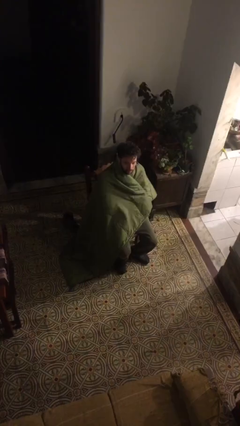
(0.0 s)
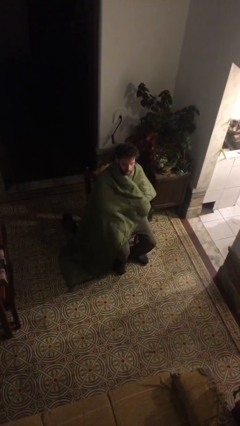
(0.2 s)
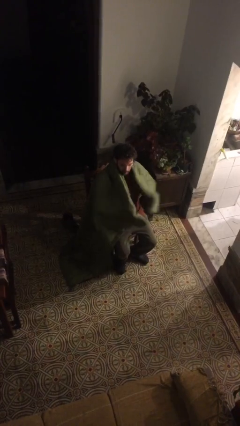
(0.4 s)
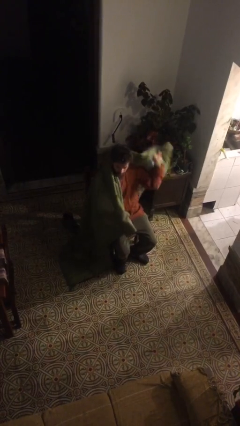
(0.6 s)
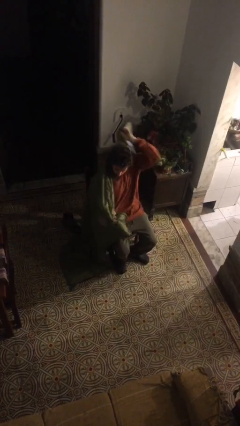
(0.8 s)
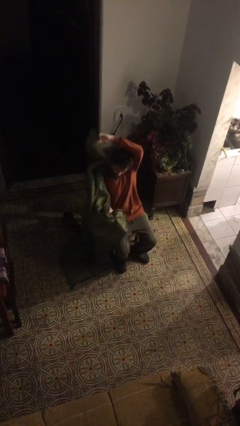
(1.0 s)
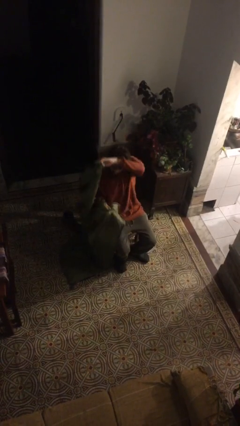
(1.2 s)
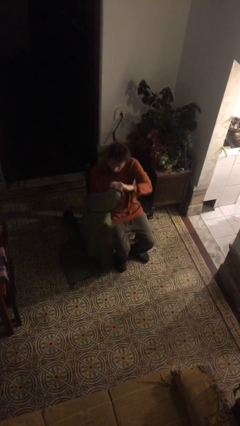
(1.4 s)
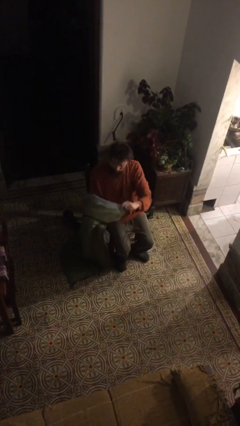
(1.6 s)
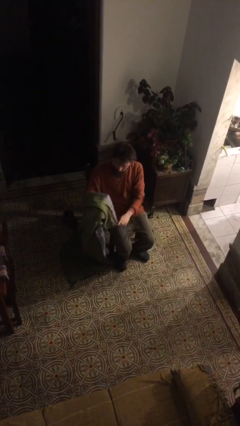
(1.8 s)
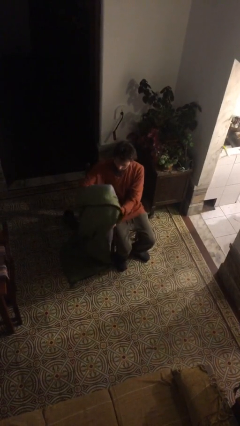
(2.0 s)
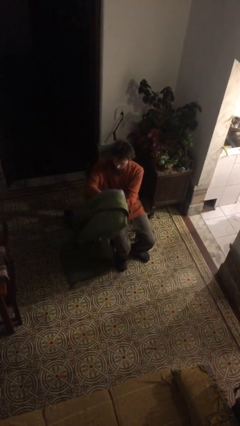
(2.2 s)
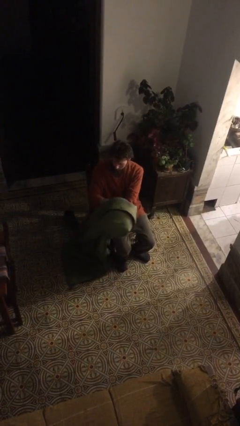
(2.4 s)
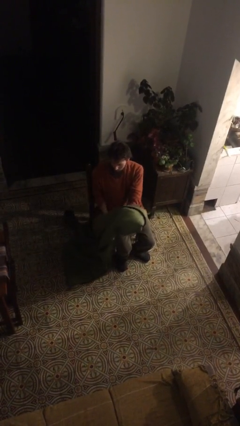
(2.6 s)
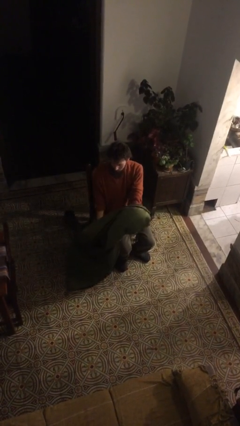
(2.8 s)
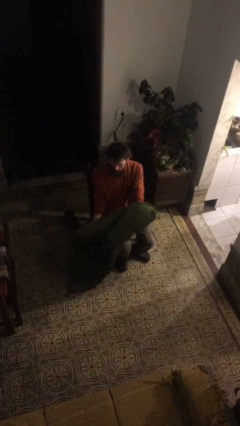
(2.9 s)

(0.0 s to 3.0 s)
person uncovers with blanket

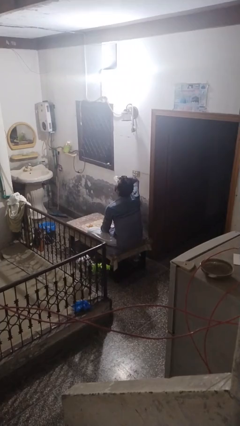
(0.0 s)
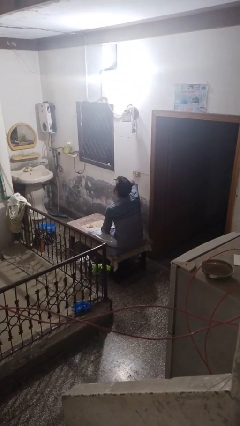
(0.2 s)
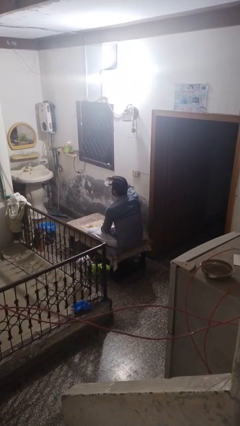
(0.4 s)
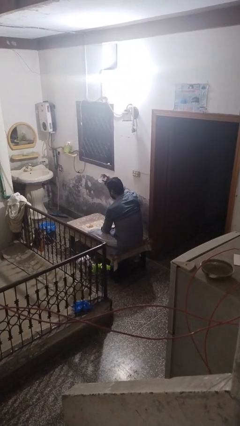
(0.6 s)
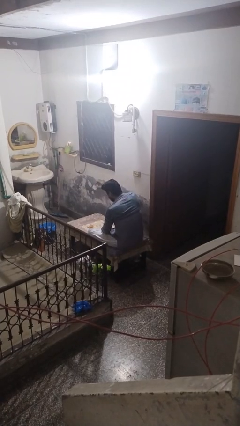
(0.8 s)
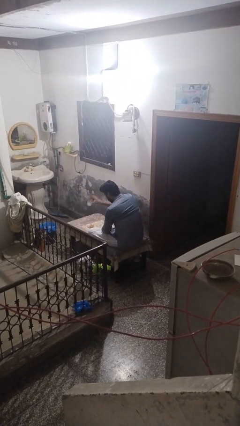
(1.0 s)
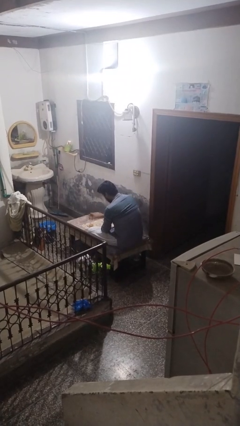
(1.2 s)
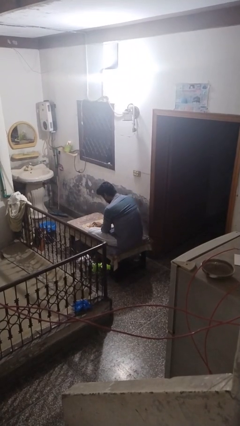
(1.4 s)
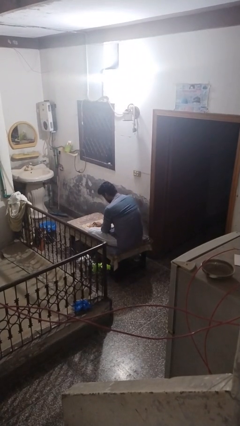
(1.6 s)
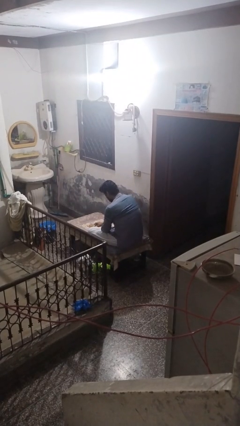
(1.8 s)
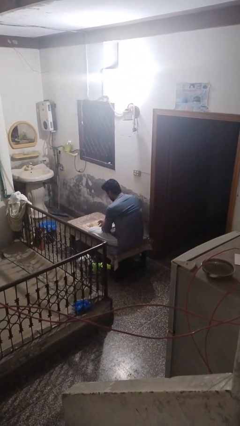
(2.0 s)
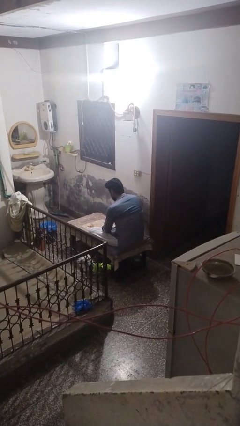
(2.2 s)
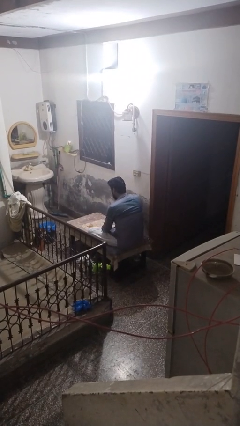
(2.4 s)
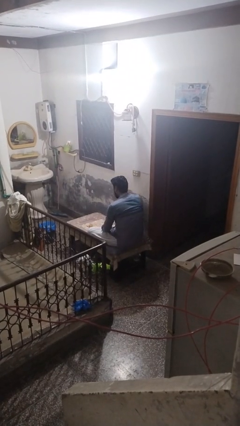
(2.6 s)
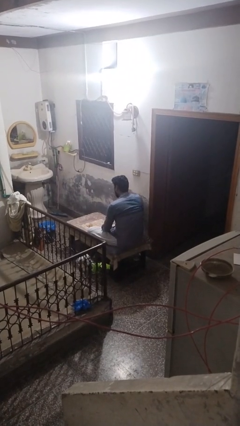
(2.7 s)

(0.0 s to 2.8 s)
person puts down object on table

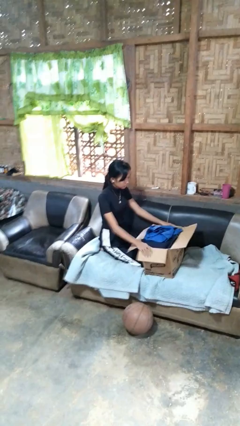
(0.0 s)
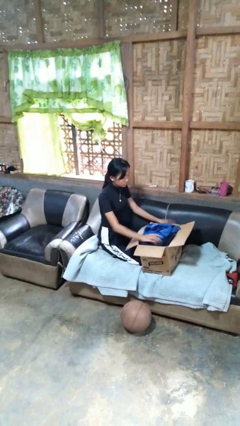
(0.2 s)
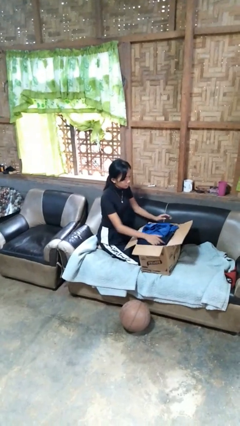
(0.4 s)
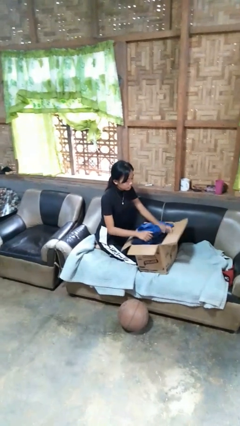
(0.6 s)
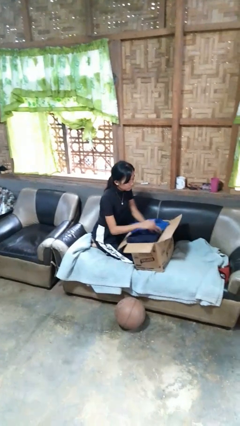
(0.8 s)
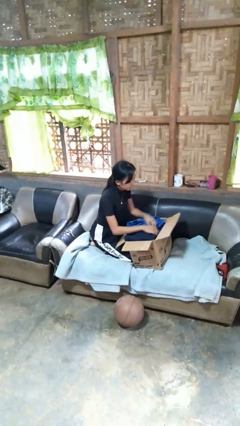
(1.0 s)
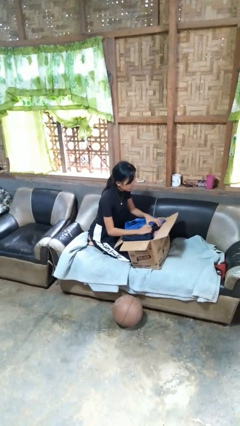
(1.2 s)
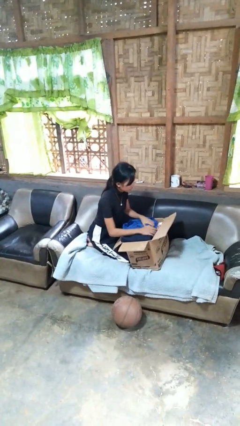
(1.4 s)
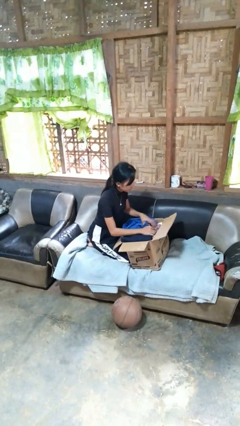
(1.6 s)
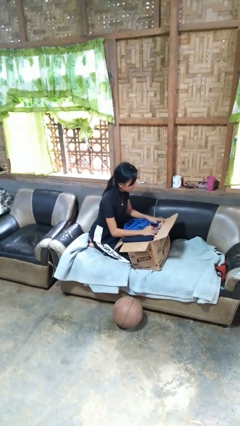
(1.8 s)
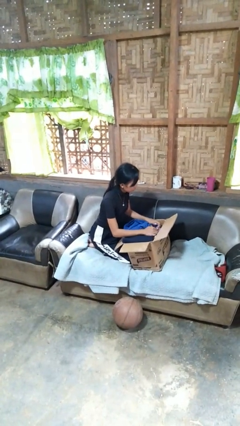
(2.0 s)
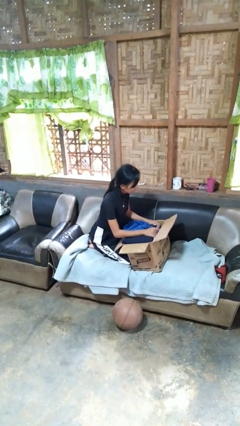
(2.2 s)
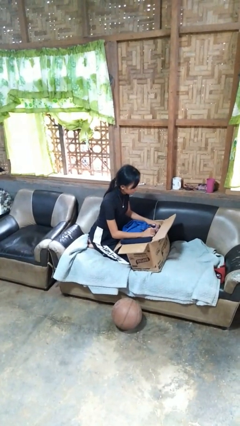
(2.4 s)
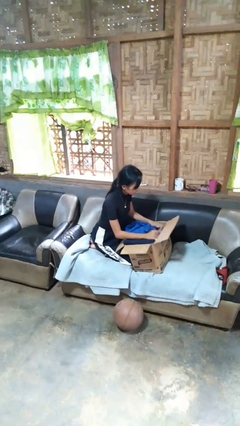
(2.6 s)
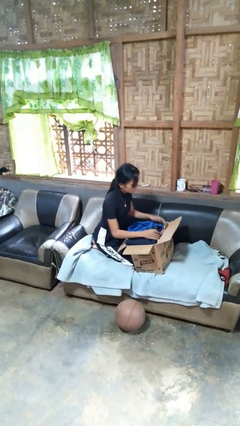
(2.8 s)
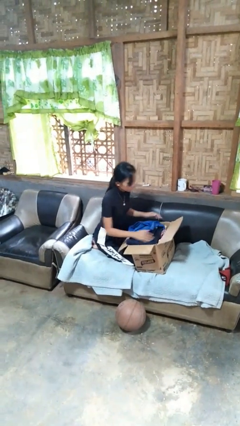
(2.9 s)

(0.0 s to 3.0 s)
person searches in box

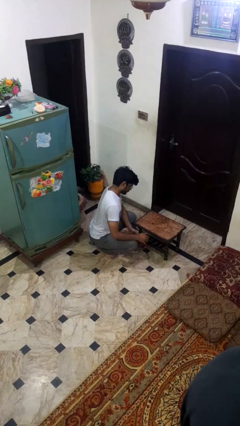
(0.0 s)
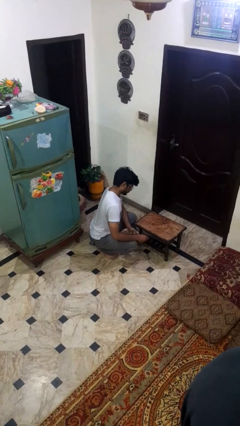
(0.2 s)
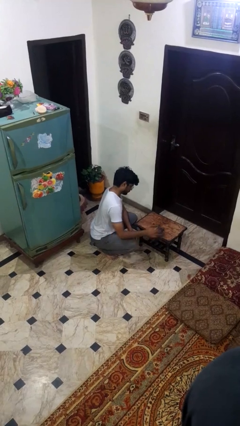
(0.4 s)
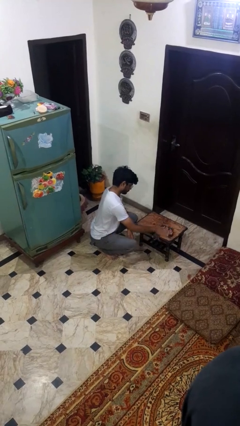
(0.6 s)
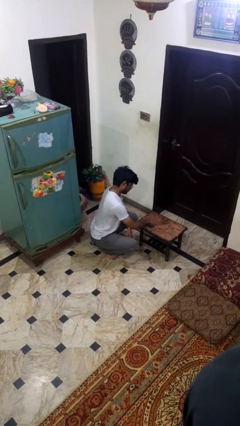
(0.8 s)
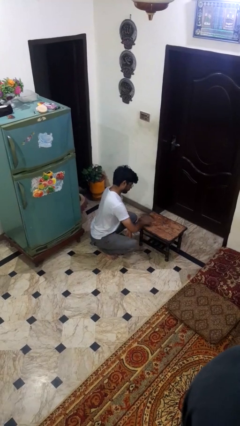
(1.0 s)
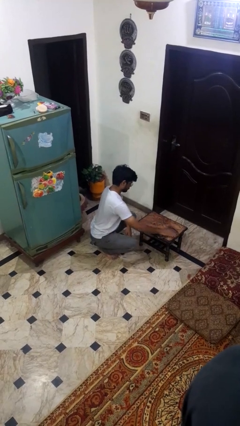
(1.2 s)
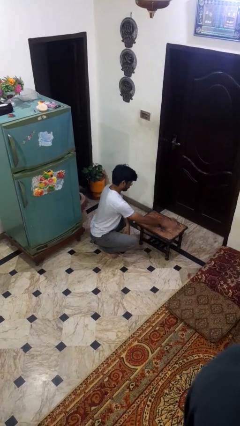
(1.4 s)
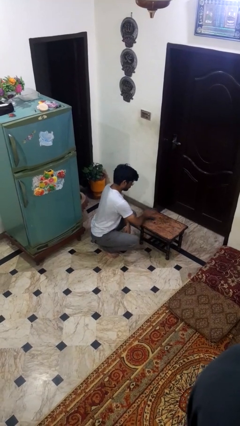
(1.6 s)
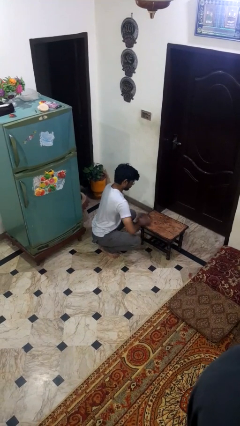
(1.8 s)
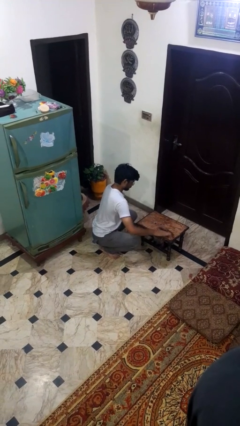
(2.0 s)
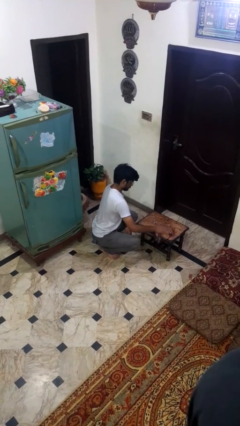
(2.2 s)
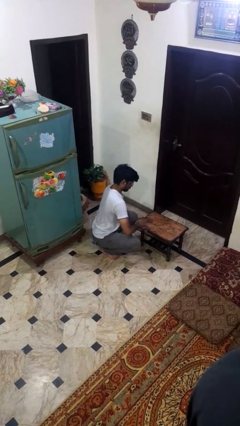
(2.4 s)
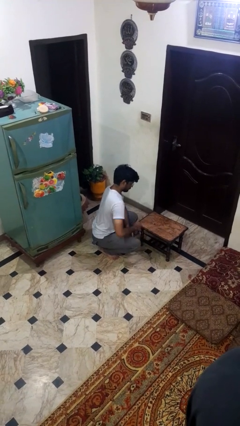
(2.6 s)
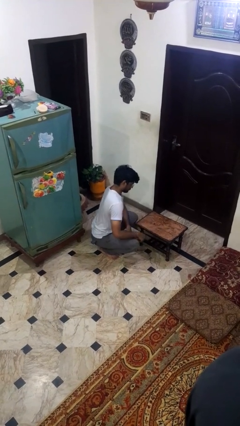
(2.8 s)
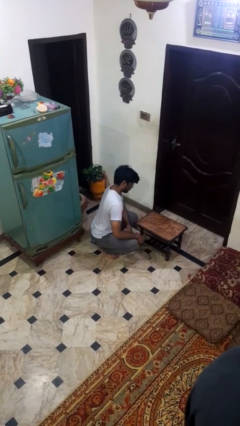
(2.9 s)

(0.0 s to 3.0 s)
person cleans table with rag

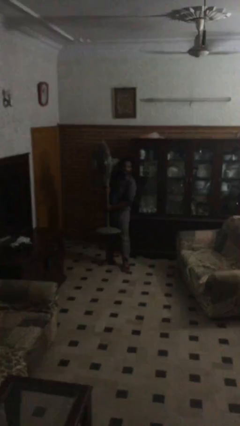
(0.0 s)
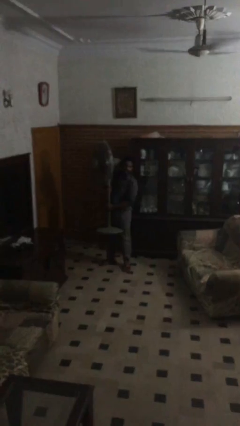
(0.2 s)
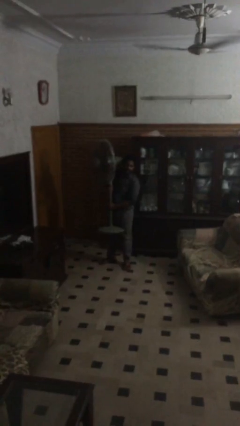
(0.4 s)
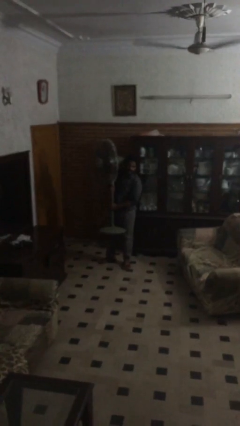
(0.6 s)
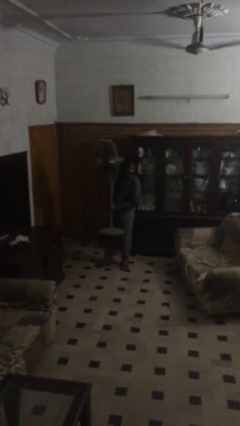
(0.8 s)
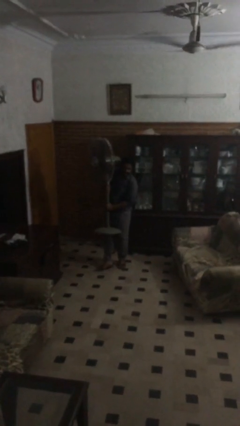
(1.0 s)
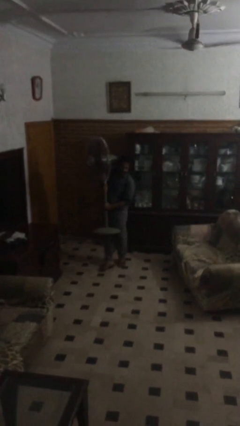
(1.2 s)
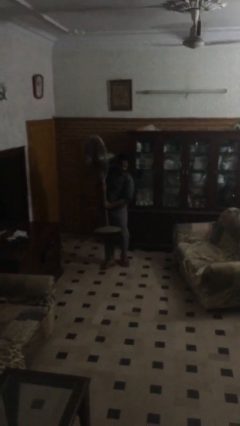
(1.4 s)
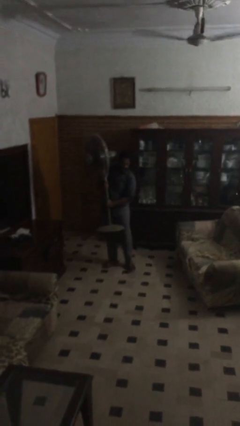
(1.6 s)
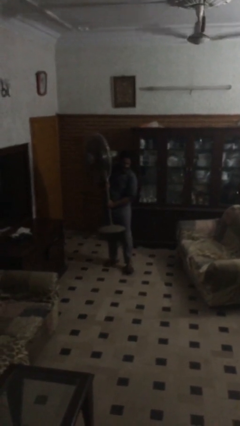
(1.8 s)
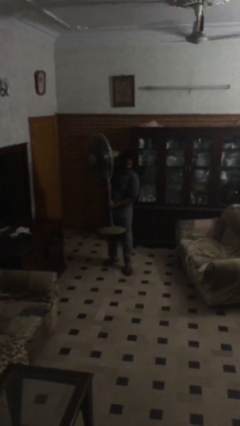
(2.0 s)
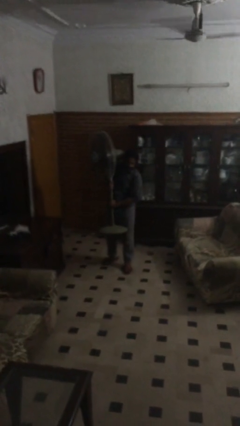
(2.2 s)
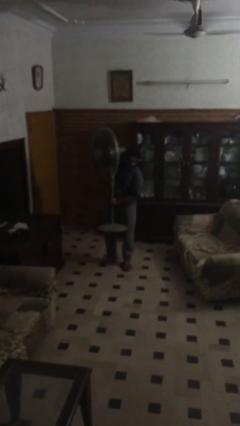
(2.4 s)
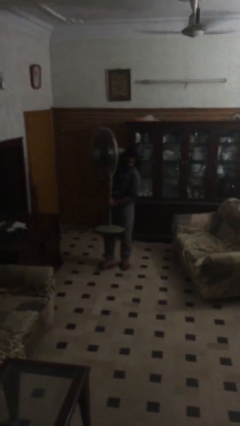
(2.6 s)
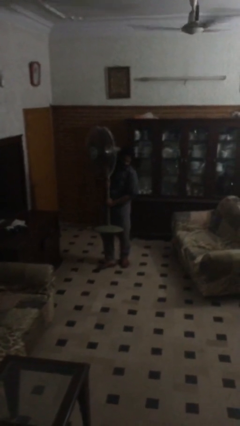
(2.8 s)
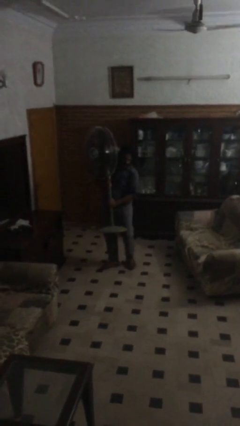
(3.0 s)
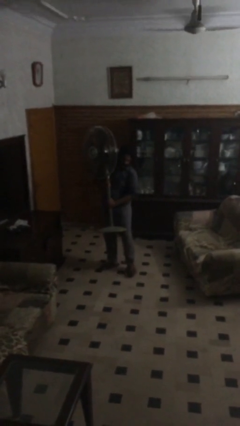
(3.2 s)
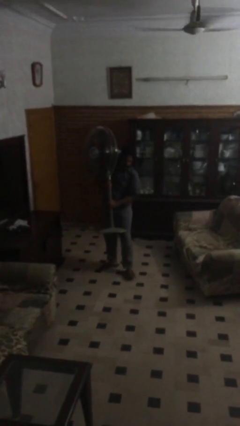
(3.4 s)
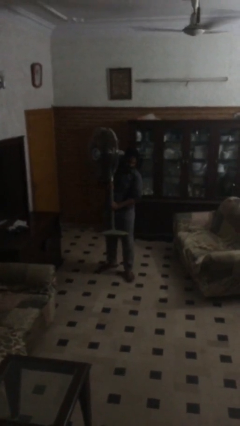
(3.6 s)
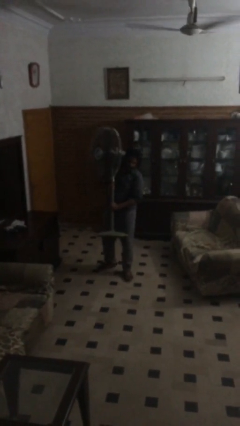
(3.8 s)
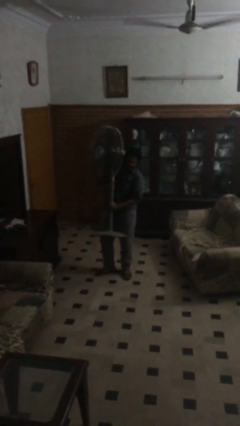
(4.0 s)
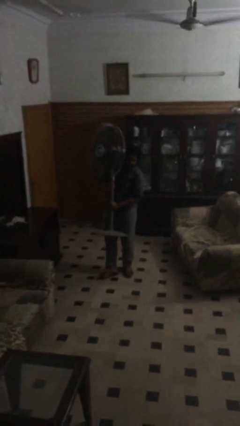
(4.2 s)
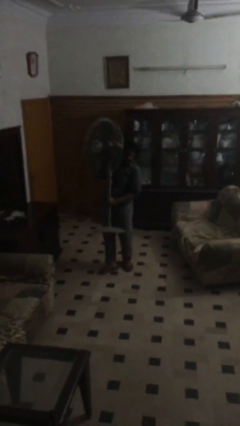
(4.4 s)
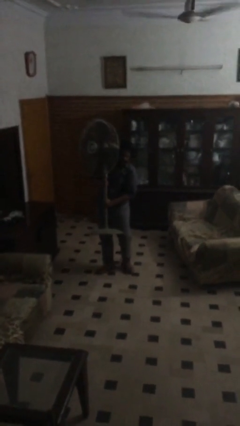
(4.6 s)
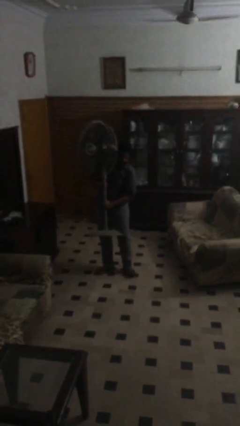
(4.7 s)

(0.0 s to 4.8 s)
person carries heavy object

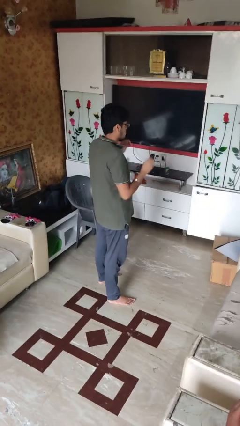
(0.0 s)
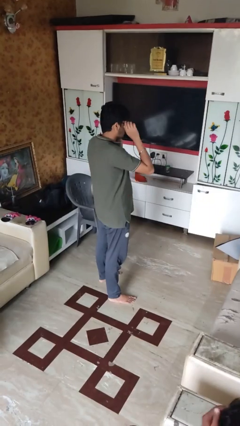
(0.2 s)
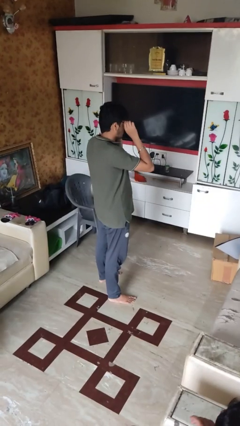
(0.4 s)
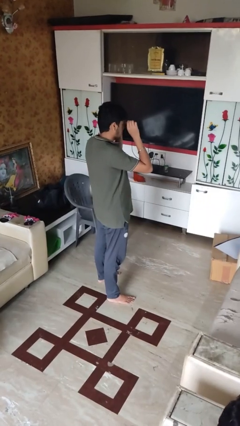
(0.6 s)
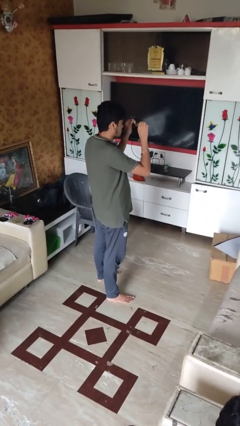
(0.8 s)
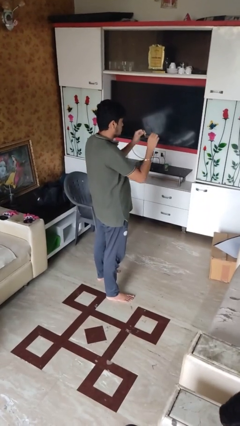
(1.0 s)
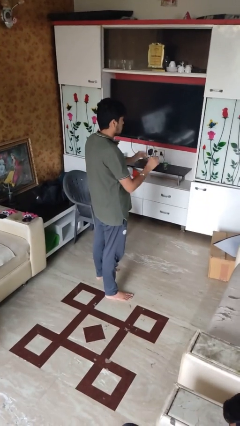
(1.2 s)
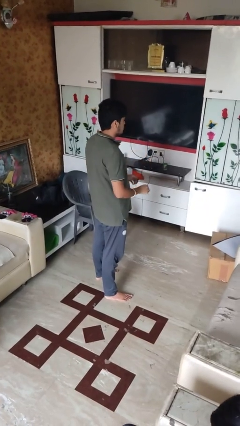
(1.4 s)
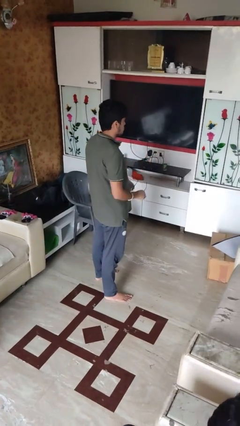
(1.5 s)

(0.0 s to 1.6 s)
person takes off glasses
